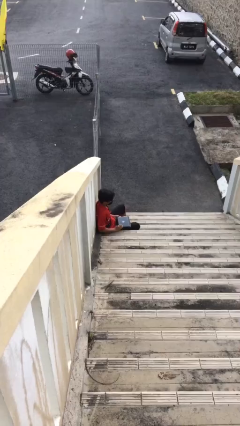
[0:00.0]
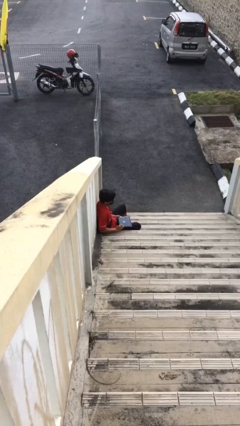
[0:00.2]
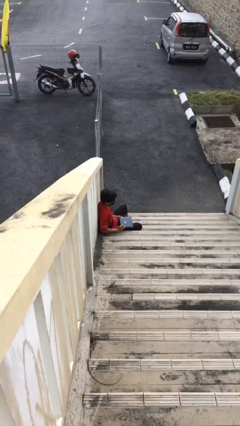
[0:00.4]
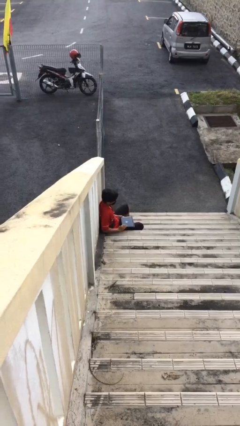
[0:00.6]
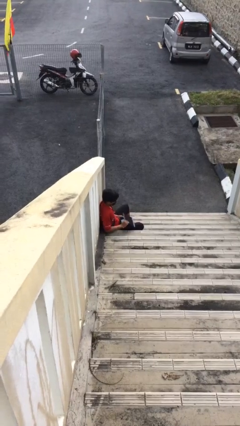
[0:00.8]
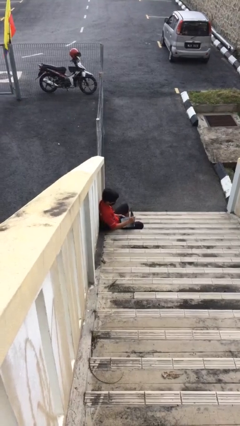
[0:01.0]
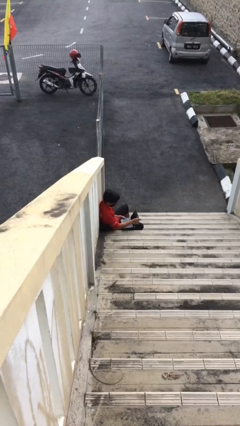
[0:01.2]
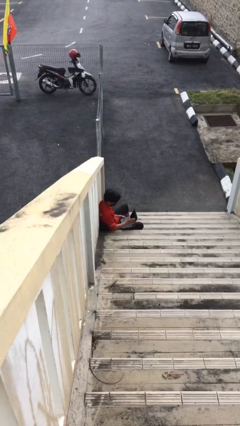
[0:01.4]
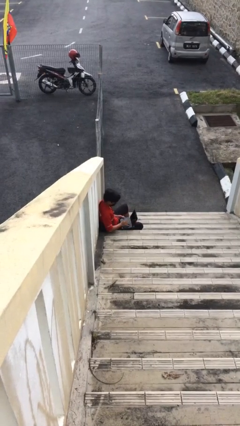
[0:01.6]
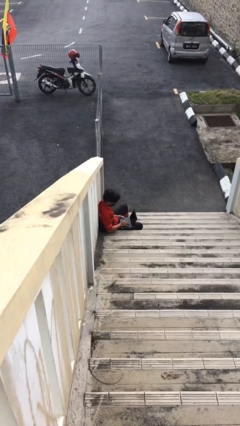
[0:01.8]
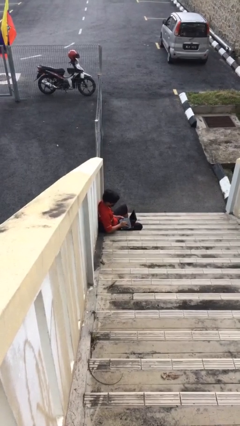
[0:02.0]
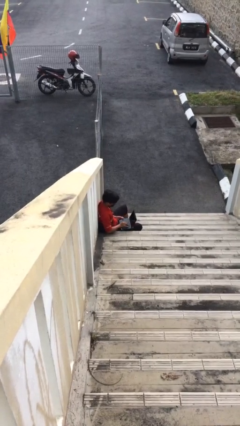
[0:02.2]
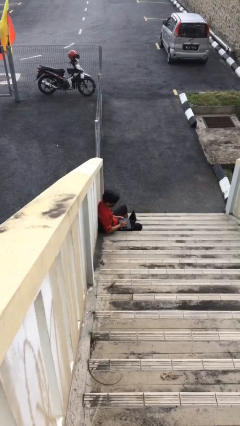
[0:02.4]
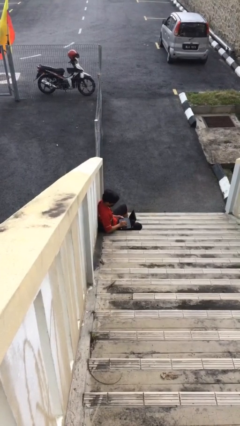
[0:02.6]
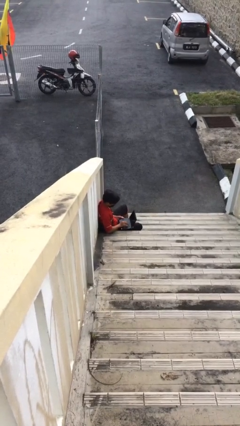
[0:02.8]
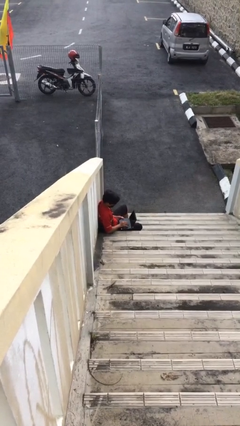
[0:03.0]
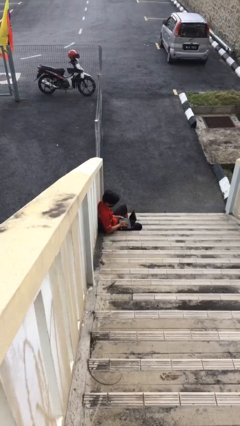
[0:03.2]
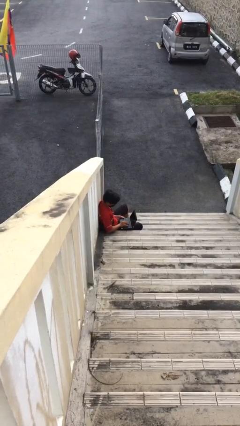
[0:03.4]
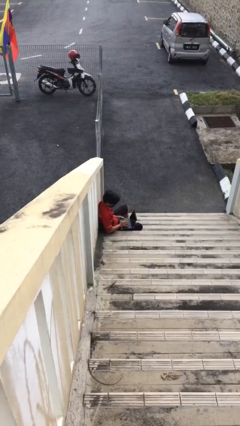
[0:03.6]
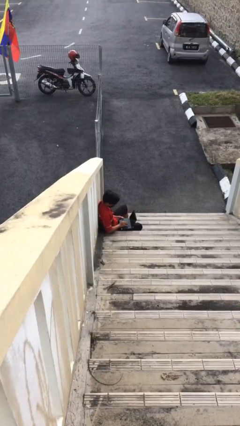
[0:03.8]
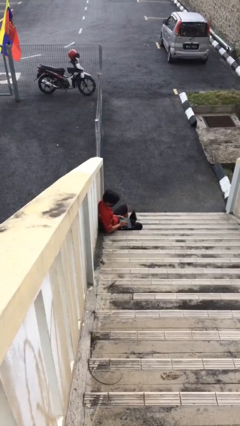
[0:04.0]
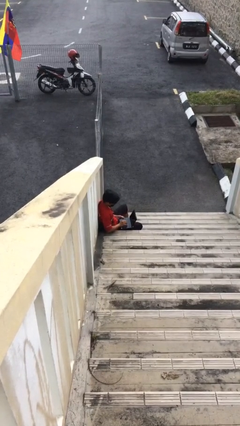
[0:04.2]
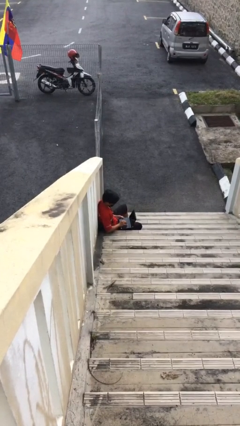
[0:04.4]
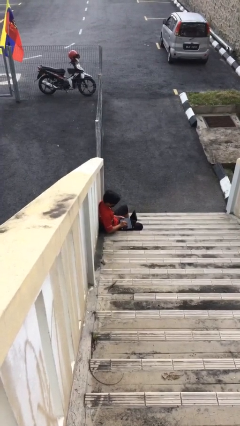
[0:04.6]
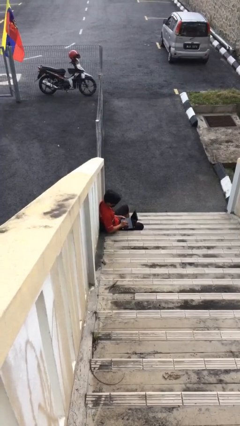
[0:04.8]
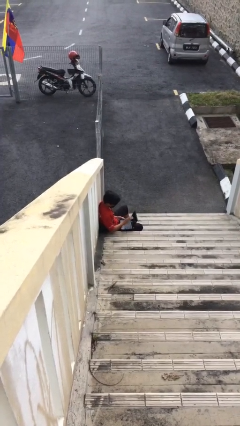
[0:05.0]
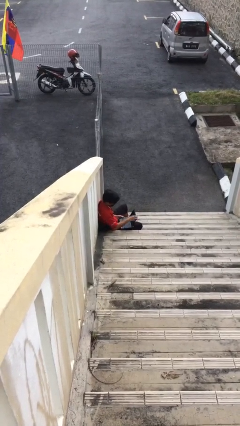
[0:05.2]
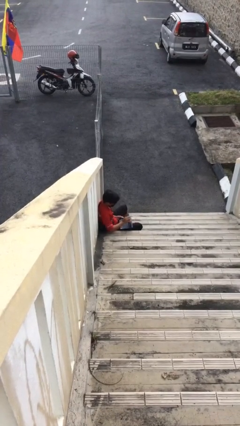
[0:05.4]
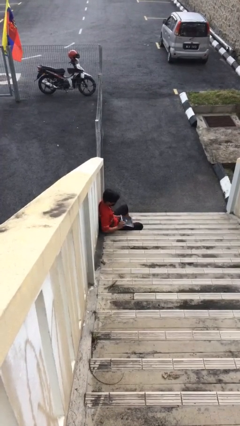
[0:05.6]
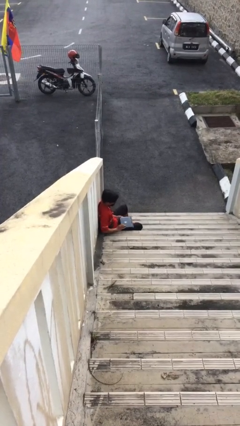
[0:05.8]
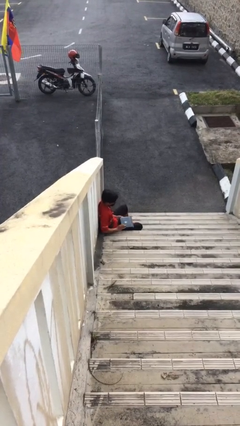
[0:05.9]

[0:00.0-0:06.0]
person interacts with laptop

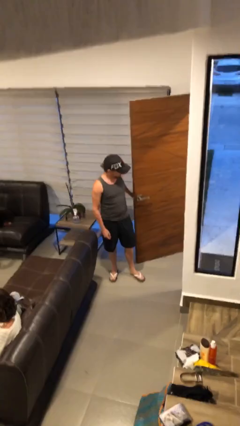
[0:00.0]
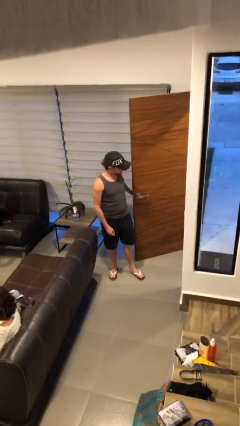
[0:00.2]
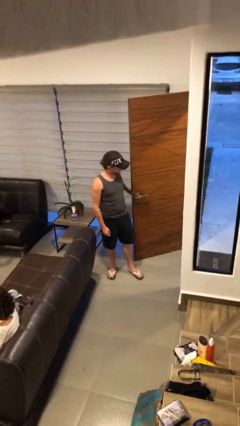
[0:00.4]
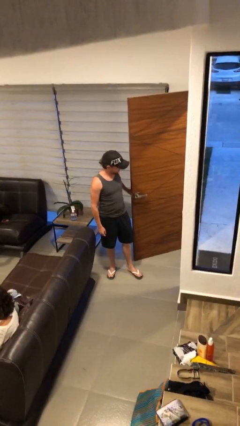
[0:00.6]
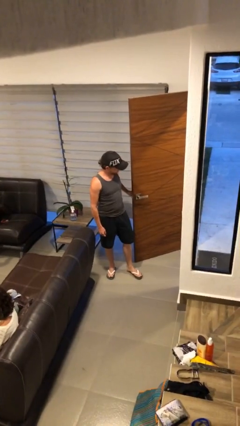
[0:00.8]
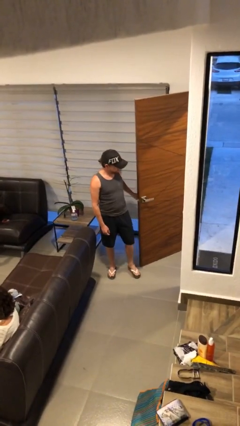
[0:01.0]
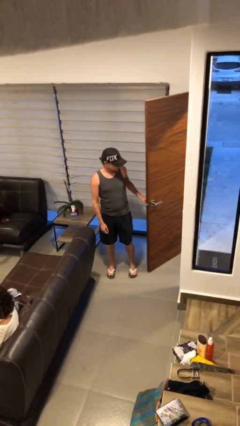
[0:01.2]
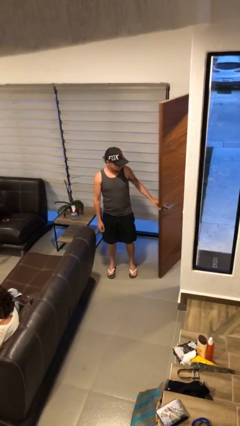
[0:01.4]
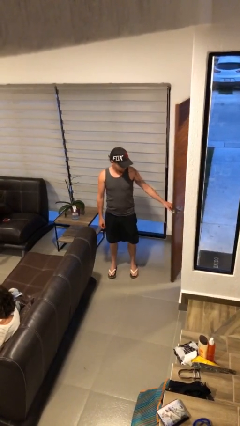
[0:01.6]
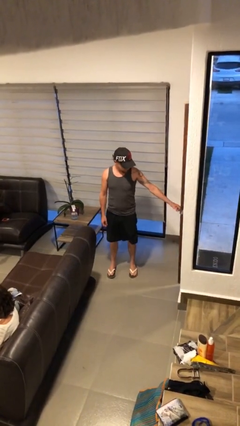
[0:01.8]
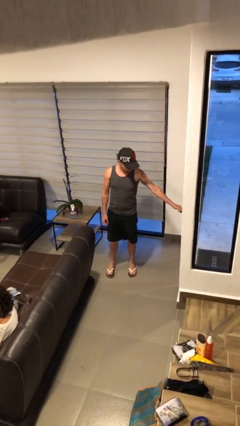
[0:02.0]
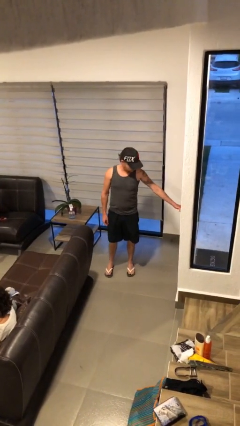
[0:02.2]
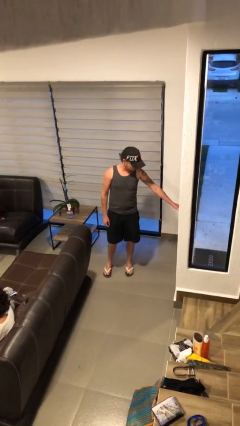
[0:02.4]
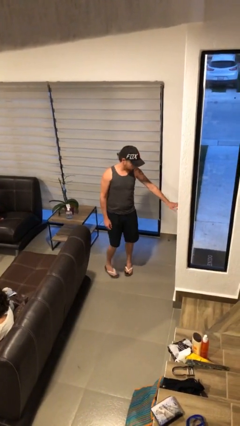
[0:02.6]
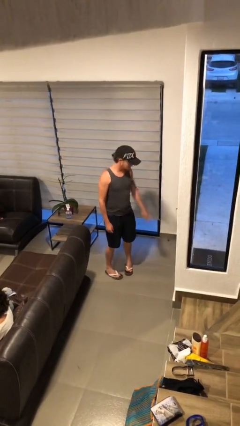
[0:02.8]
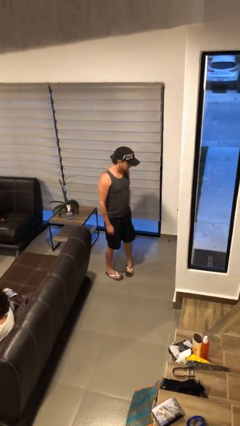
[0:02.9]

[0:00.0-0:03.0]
person closes facility door

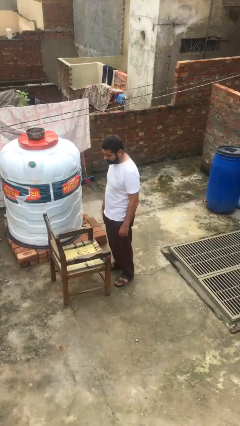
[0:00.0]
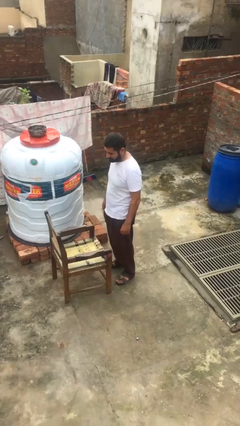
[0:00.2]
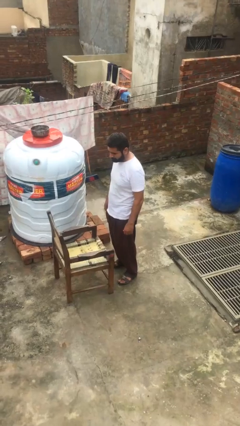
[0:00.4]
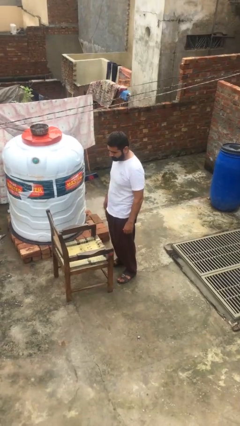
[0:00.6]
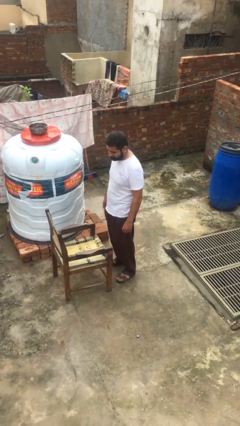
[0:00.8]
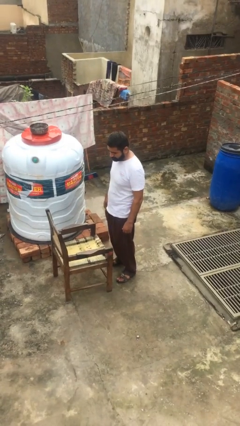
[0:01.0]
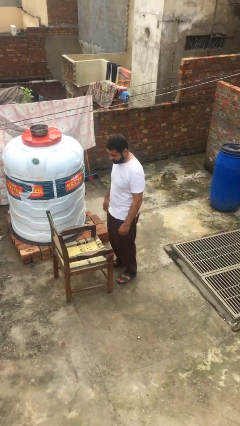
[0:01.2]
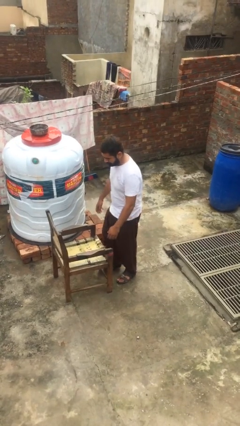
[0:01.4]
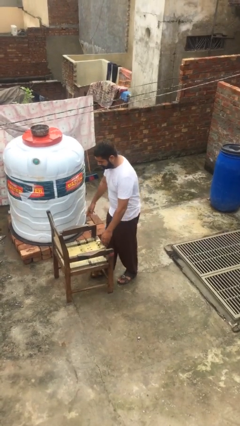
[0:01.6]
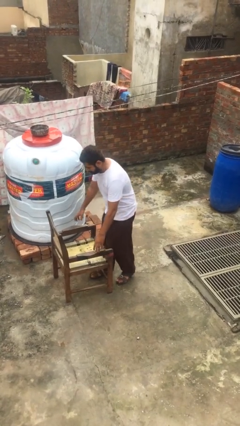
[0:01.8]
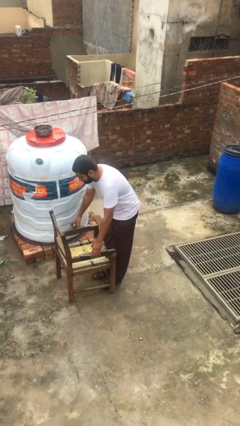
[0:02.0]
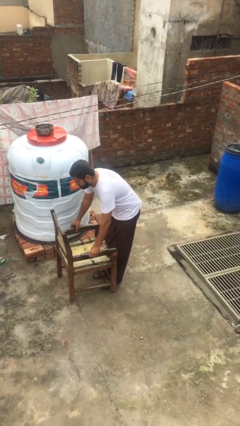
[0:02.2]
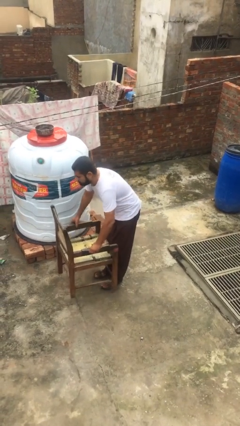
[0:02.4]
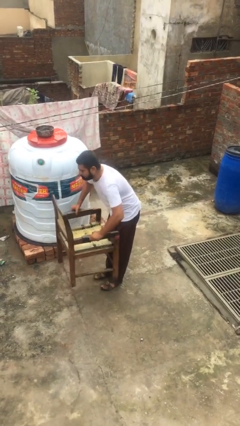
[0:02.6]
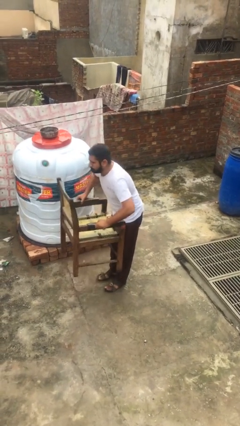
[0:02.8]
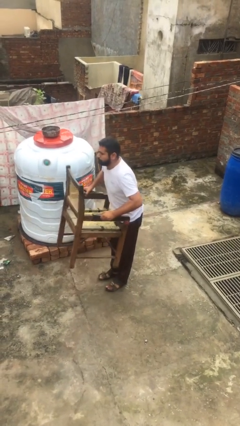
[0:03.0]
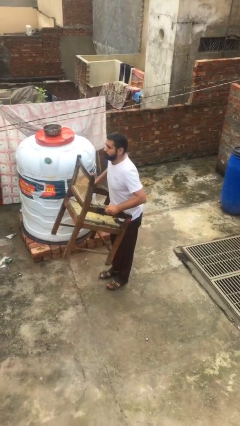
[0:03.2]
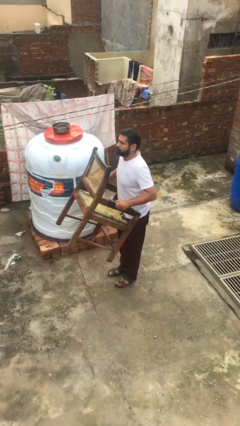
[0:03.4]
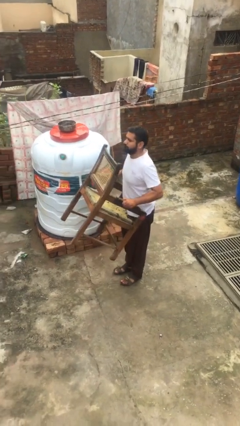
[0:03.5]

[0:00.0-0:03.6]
person picks up object from floor

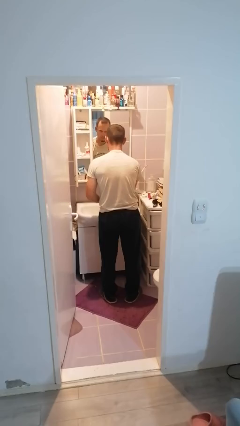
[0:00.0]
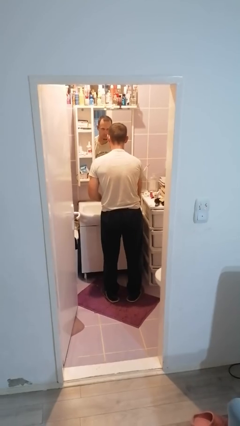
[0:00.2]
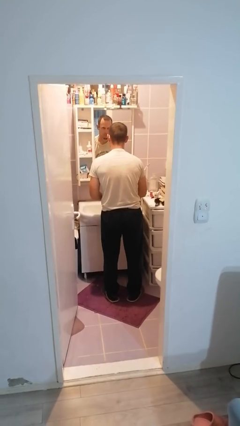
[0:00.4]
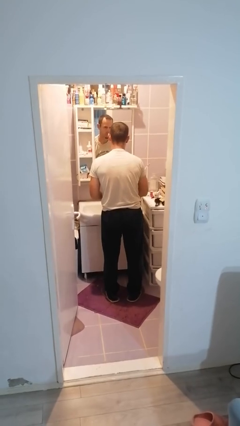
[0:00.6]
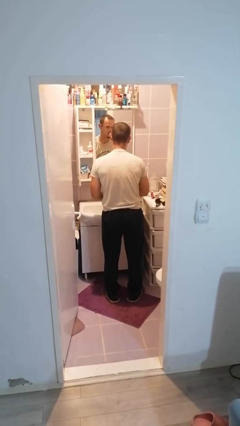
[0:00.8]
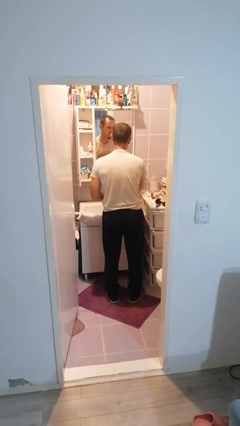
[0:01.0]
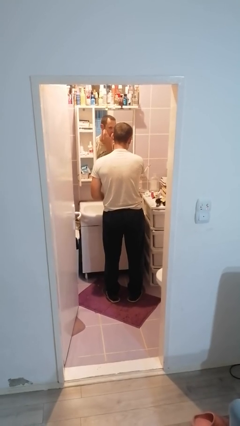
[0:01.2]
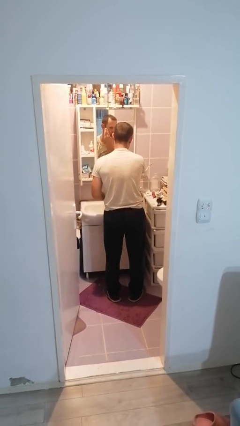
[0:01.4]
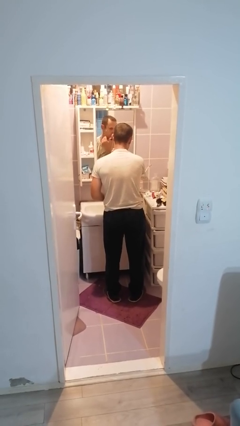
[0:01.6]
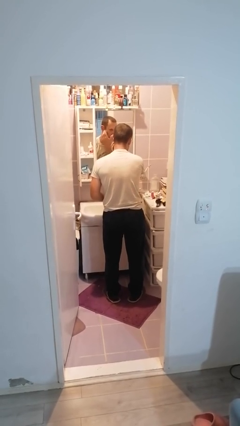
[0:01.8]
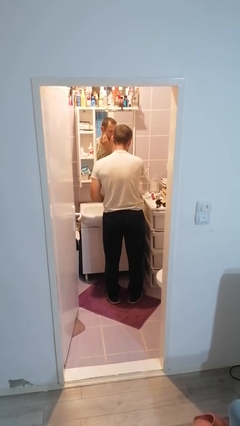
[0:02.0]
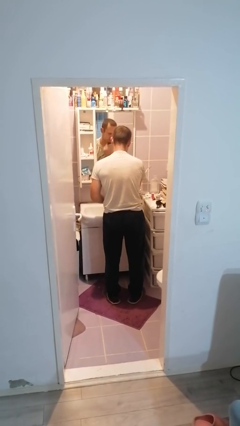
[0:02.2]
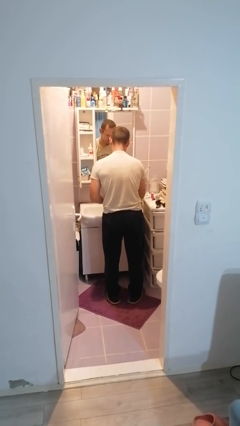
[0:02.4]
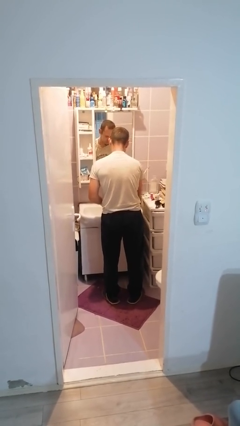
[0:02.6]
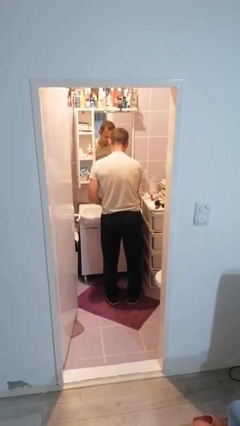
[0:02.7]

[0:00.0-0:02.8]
person applies shaving cream

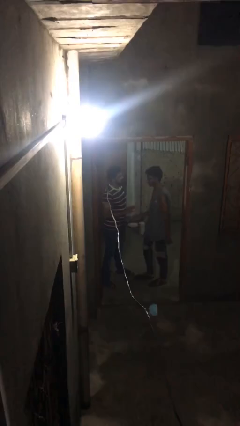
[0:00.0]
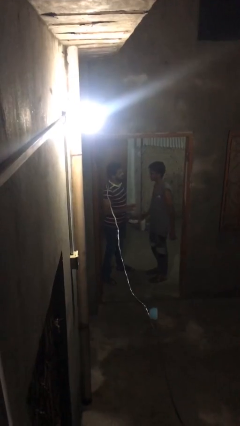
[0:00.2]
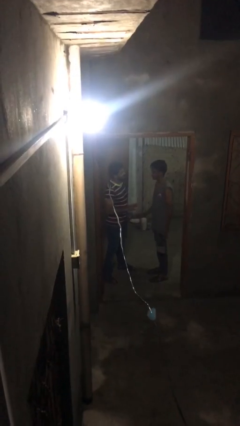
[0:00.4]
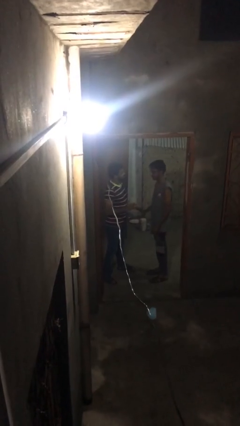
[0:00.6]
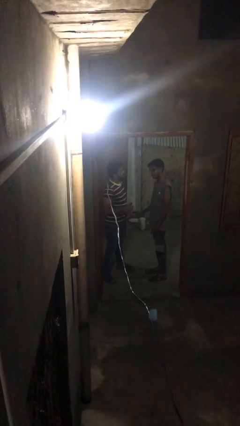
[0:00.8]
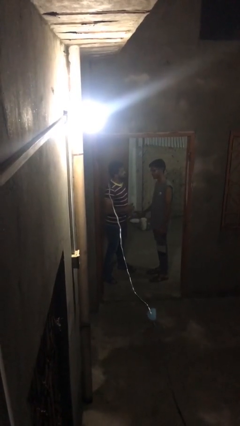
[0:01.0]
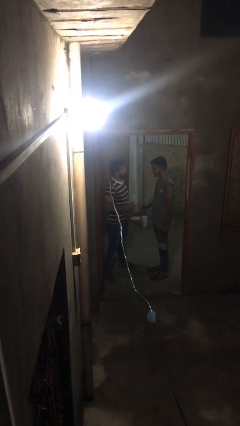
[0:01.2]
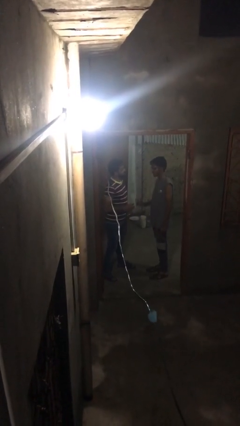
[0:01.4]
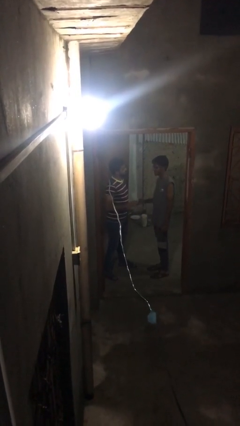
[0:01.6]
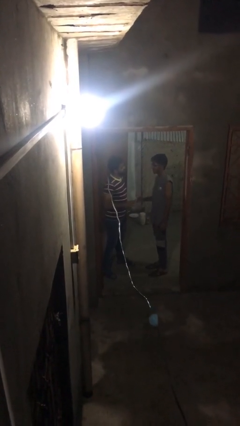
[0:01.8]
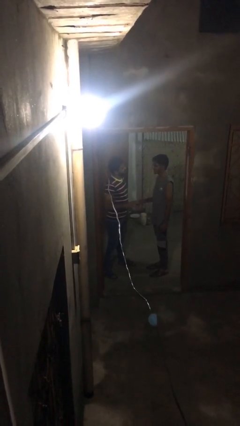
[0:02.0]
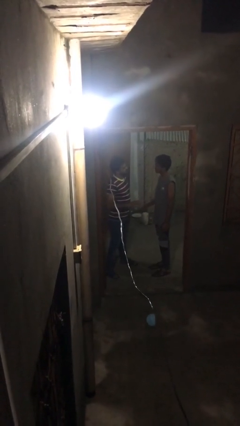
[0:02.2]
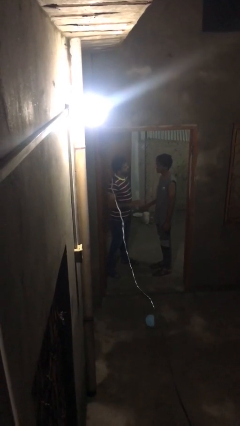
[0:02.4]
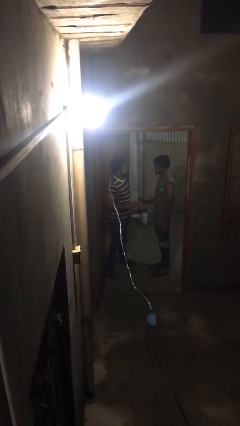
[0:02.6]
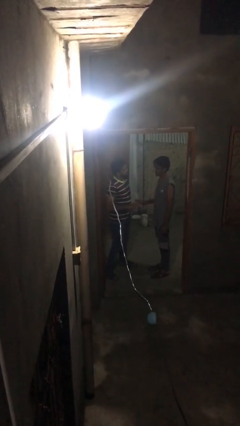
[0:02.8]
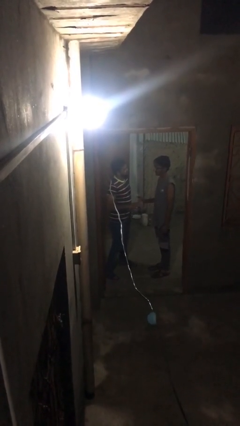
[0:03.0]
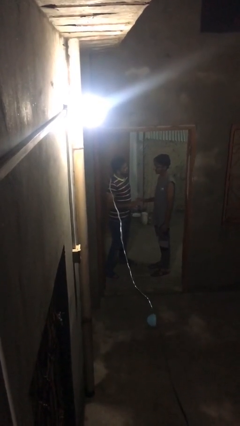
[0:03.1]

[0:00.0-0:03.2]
person talks to person
